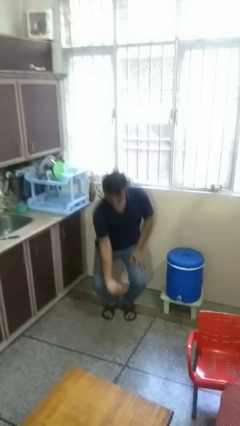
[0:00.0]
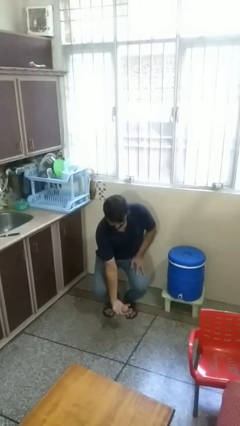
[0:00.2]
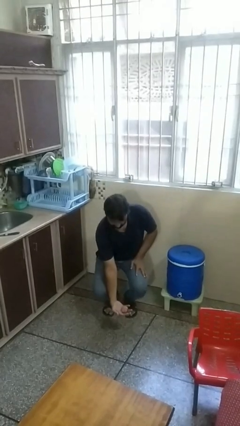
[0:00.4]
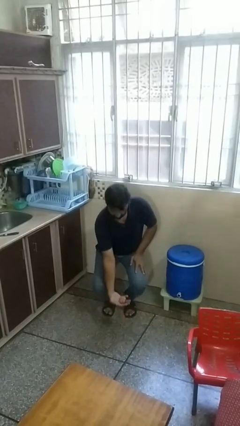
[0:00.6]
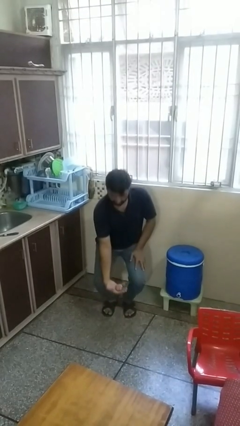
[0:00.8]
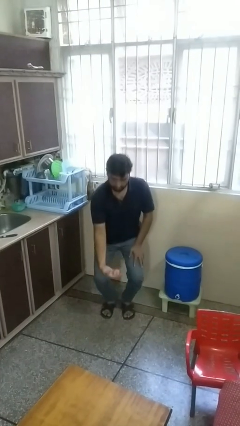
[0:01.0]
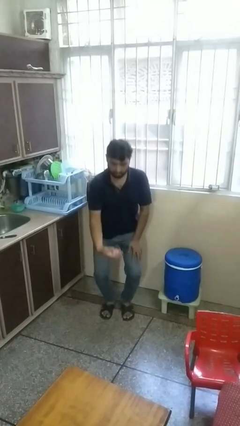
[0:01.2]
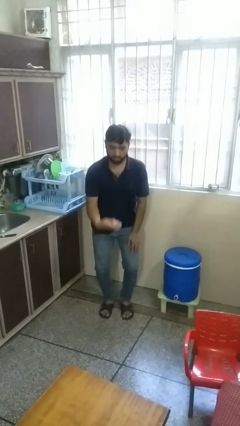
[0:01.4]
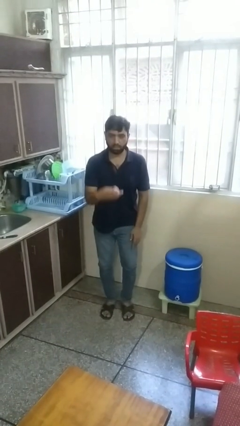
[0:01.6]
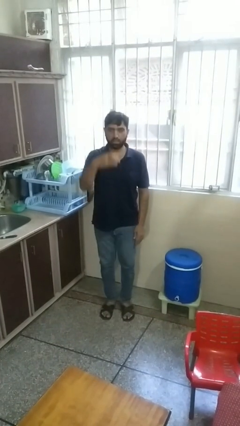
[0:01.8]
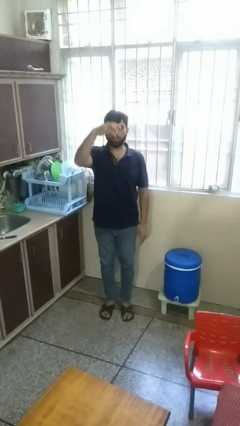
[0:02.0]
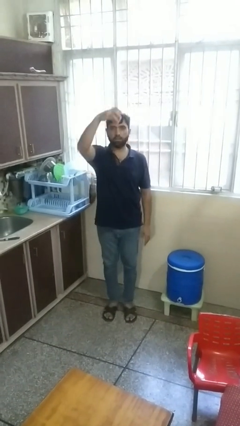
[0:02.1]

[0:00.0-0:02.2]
person catches dropped object

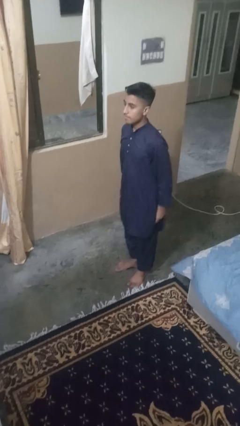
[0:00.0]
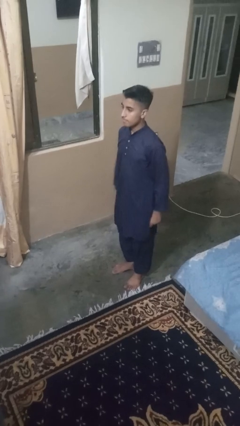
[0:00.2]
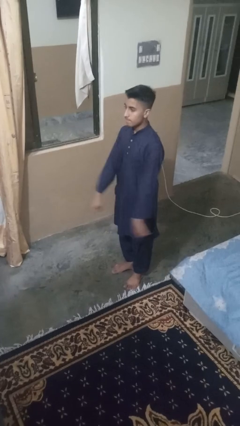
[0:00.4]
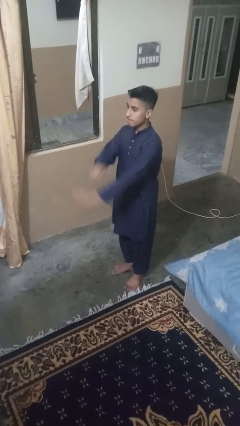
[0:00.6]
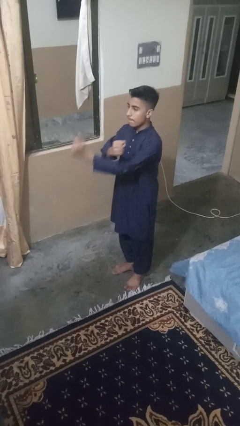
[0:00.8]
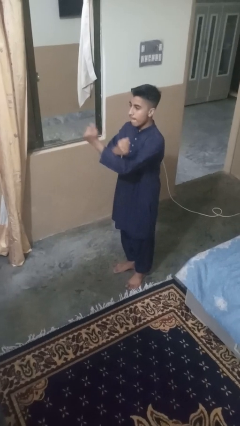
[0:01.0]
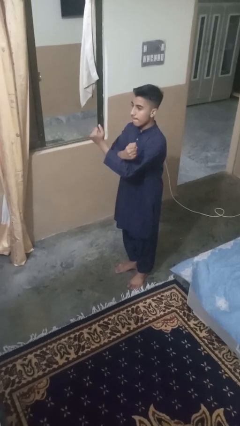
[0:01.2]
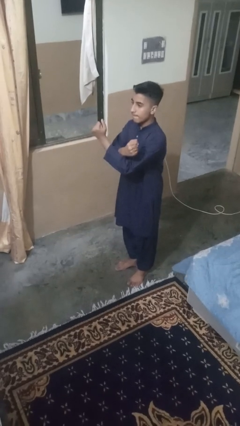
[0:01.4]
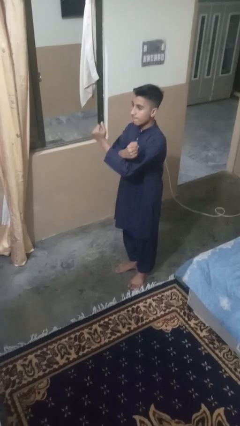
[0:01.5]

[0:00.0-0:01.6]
person crosses arms

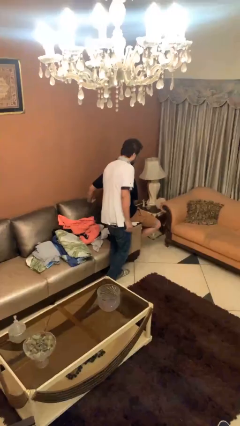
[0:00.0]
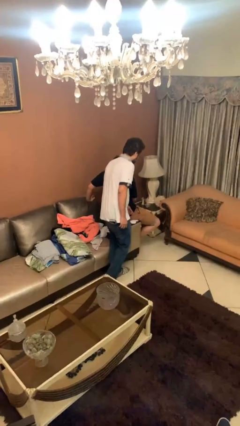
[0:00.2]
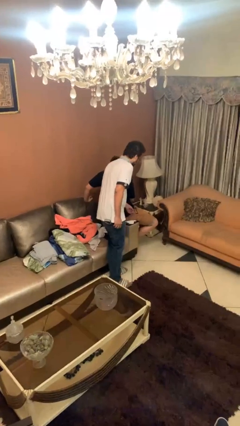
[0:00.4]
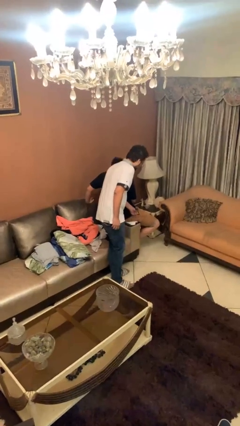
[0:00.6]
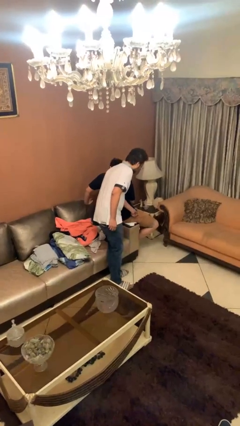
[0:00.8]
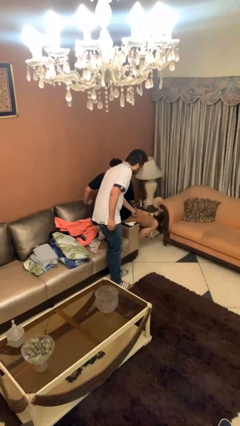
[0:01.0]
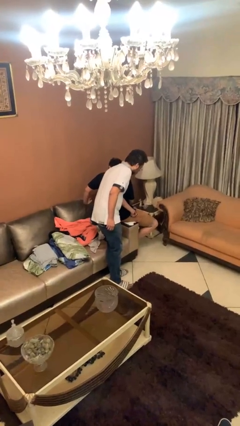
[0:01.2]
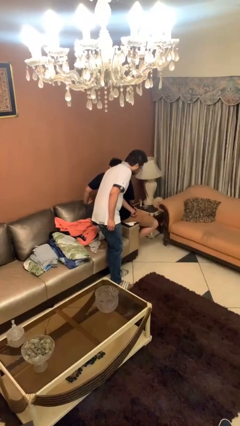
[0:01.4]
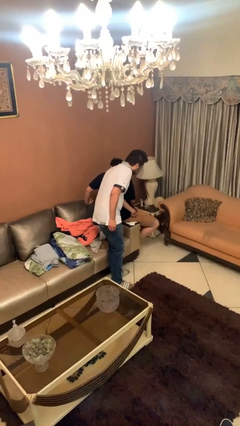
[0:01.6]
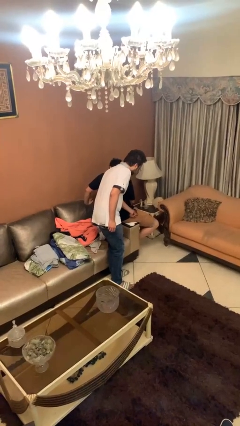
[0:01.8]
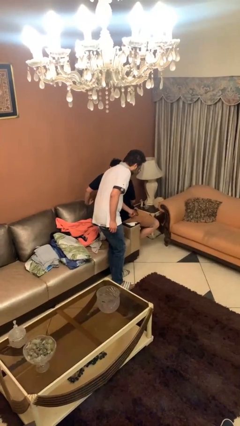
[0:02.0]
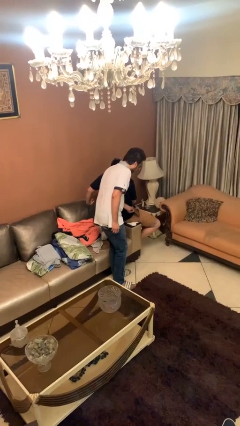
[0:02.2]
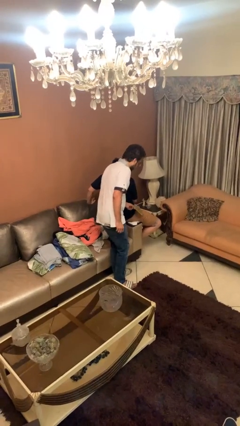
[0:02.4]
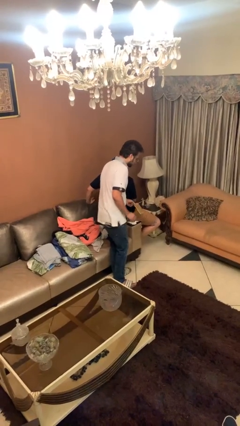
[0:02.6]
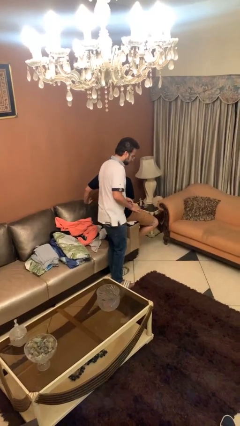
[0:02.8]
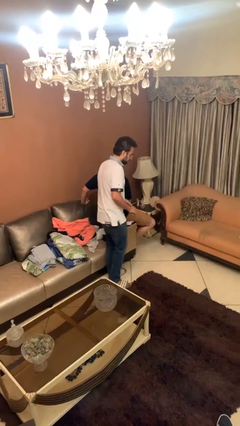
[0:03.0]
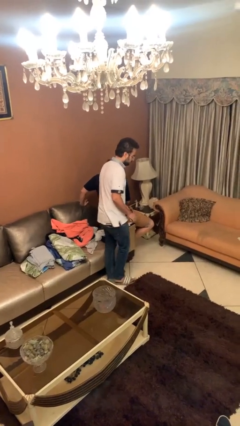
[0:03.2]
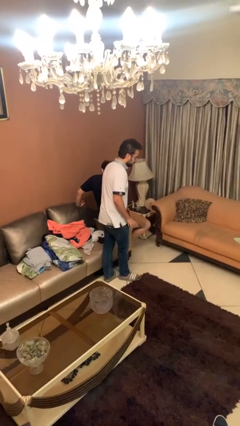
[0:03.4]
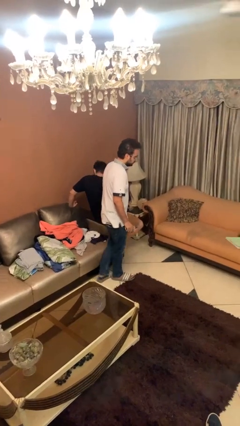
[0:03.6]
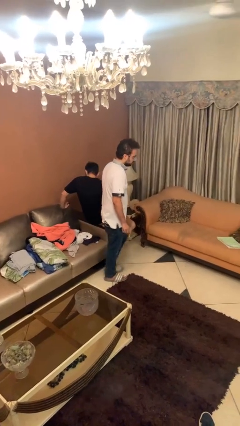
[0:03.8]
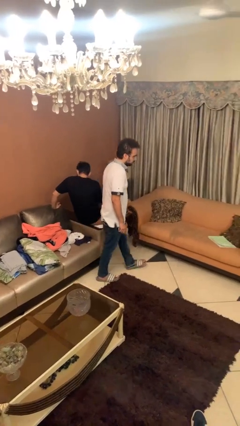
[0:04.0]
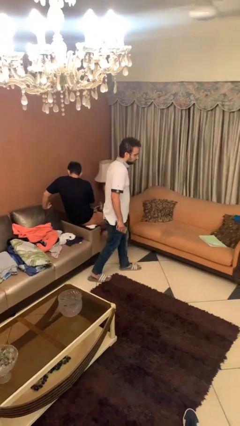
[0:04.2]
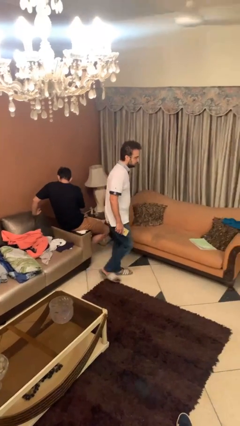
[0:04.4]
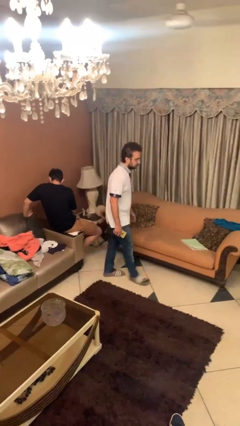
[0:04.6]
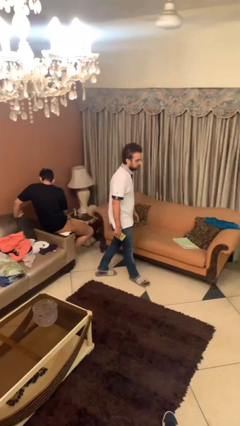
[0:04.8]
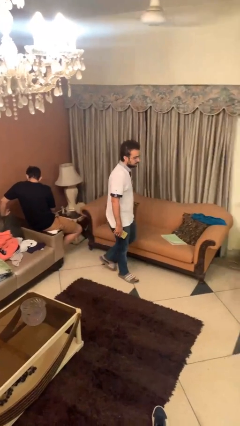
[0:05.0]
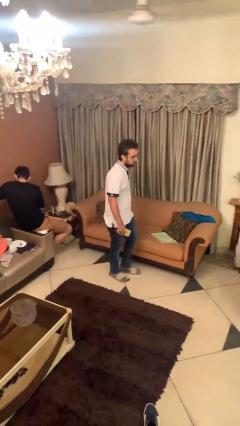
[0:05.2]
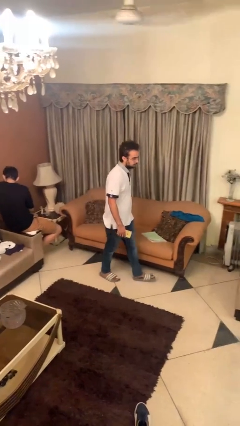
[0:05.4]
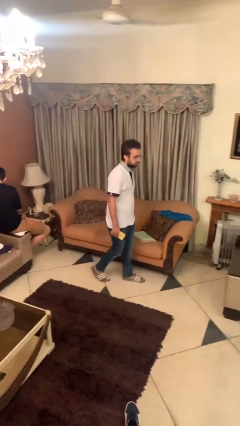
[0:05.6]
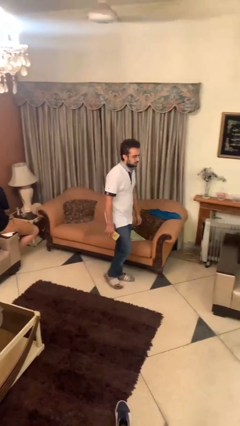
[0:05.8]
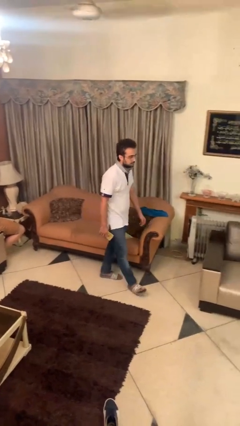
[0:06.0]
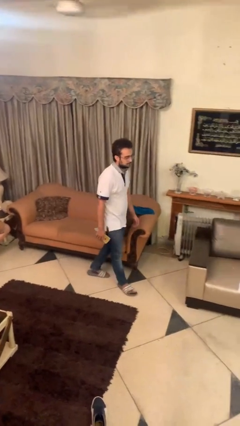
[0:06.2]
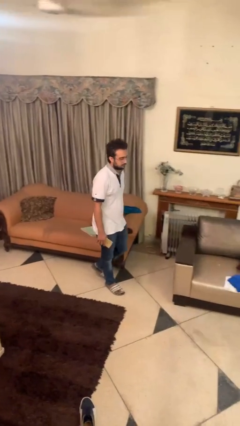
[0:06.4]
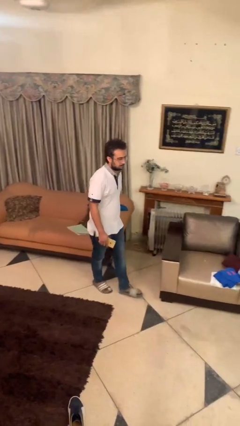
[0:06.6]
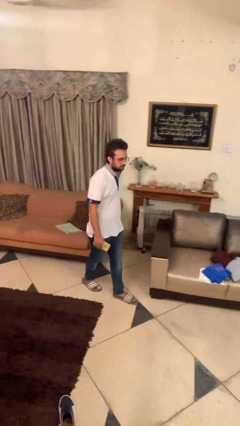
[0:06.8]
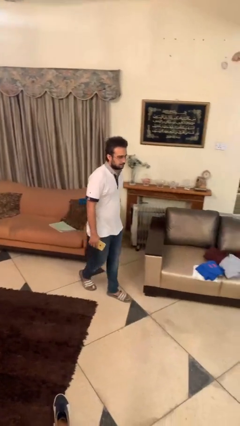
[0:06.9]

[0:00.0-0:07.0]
person steals object from person

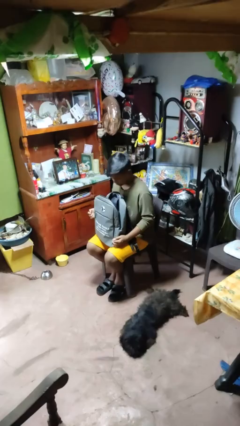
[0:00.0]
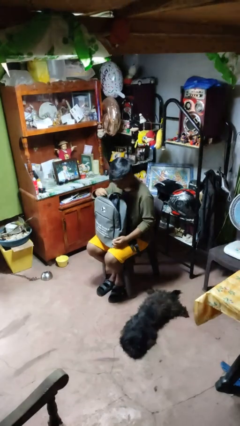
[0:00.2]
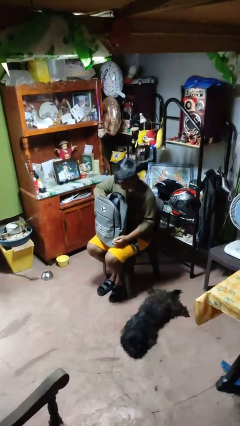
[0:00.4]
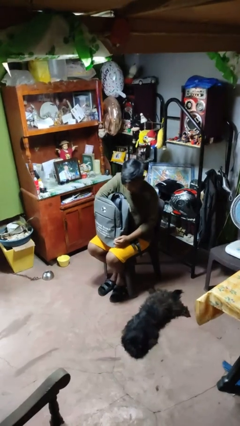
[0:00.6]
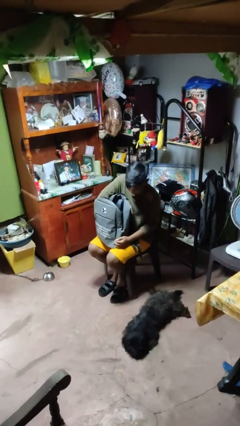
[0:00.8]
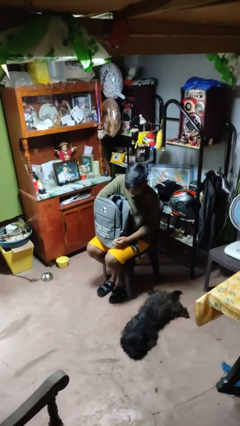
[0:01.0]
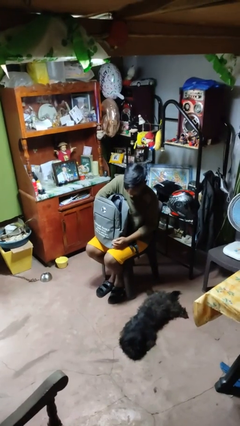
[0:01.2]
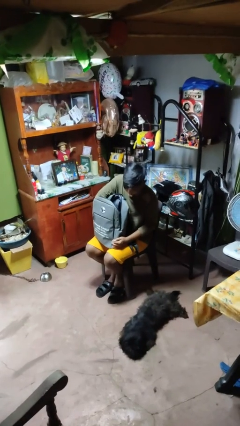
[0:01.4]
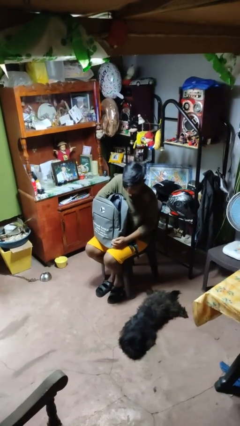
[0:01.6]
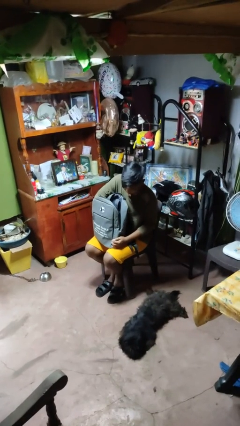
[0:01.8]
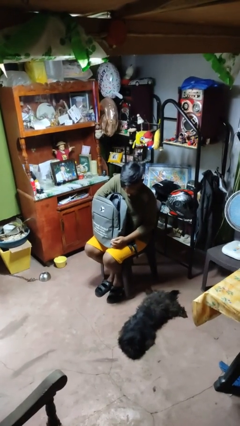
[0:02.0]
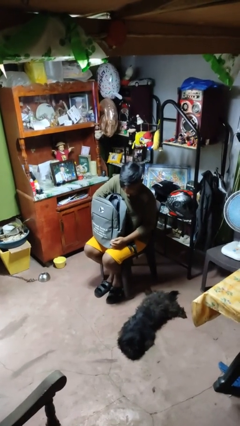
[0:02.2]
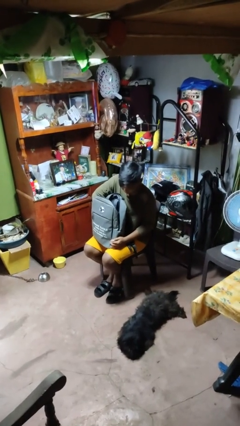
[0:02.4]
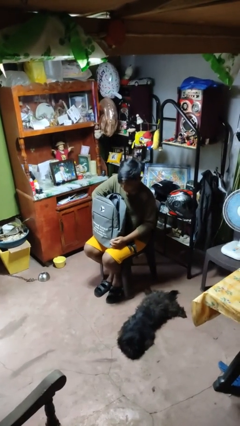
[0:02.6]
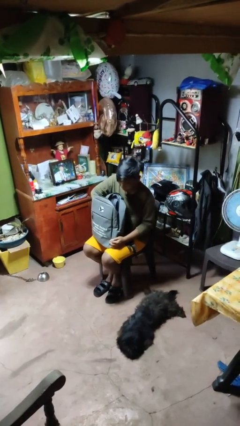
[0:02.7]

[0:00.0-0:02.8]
person searches in backpack

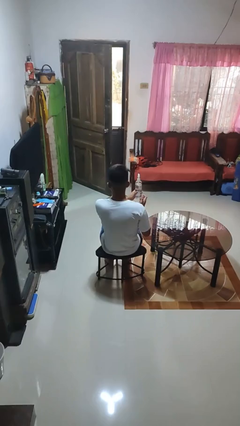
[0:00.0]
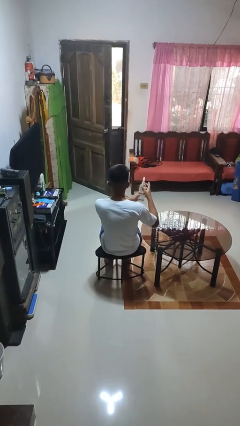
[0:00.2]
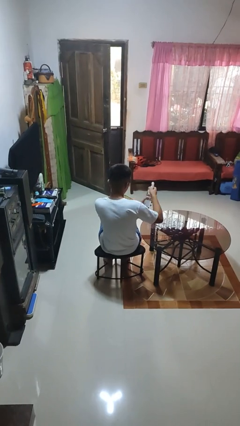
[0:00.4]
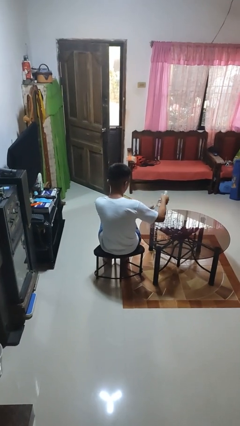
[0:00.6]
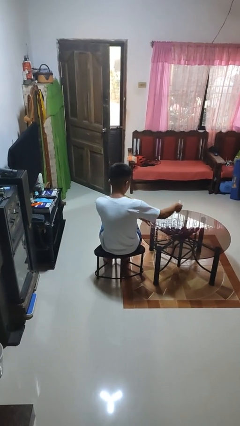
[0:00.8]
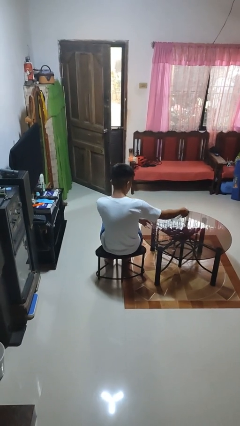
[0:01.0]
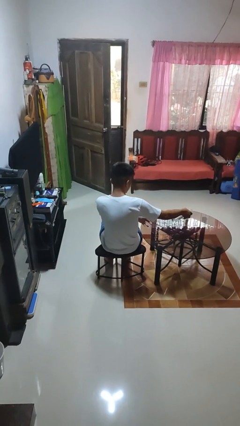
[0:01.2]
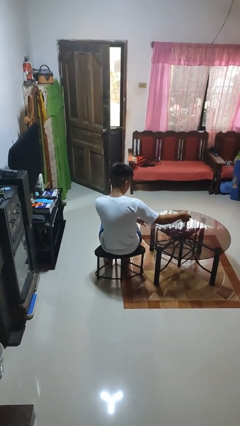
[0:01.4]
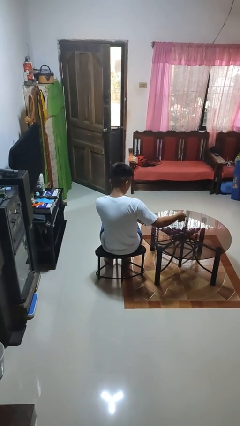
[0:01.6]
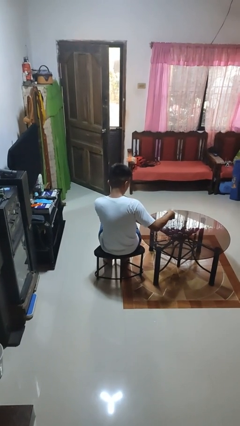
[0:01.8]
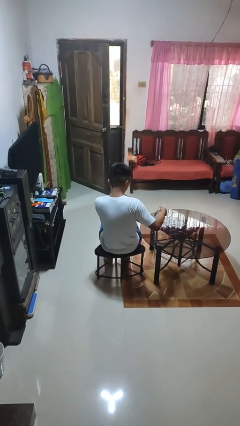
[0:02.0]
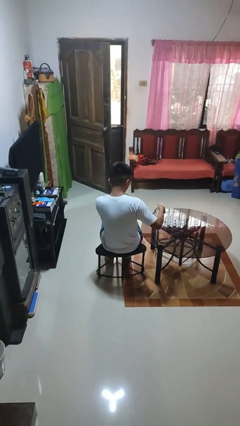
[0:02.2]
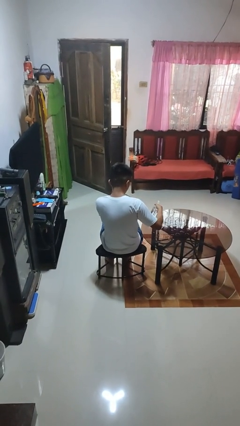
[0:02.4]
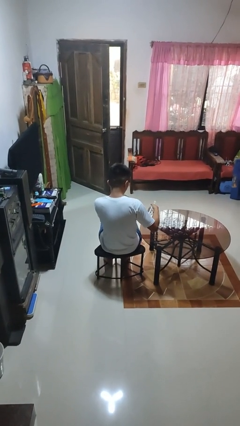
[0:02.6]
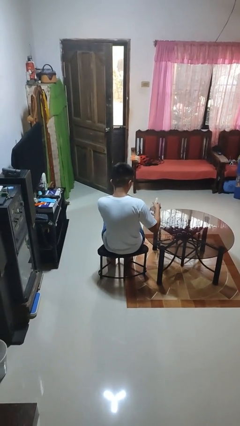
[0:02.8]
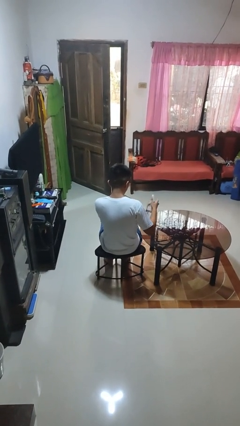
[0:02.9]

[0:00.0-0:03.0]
person sprays from bottle

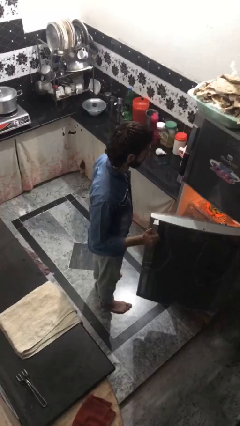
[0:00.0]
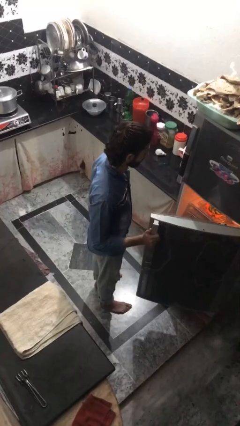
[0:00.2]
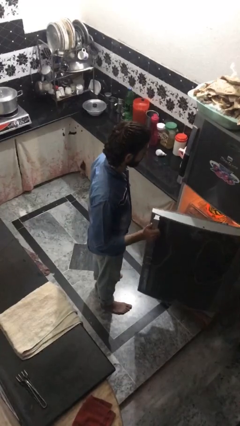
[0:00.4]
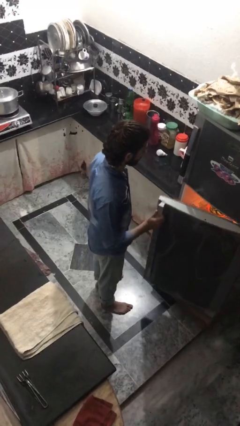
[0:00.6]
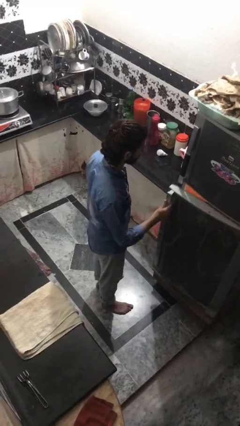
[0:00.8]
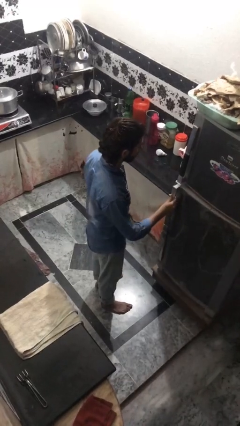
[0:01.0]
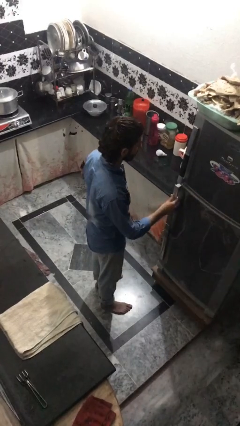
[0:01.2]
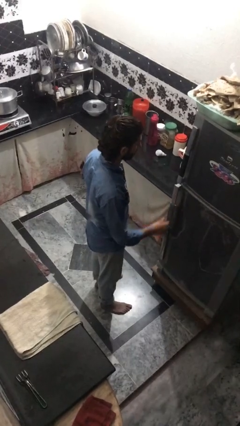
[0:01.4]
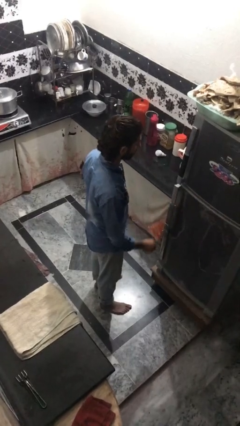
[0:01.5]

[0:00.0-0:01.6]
person closes refrigerator
